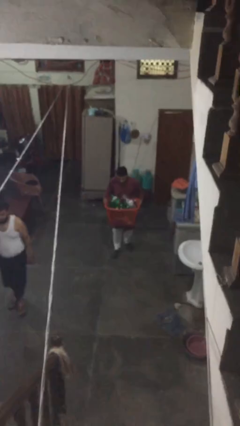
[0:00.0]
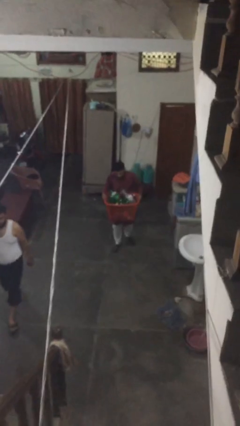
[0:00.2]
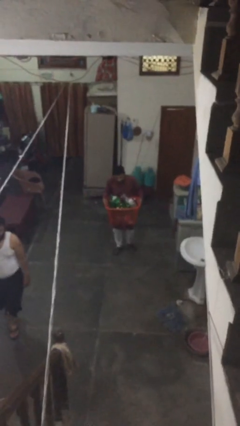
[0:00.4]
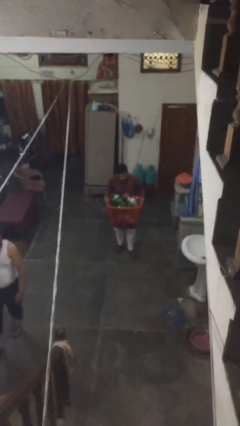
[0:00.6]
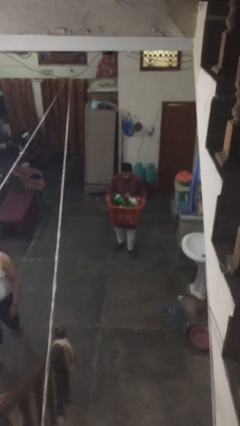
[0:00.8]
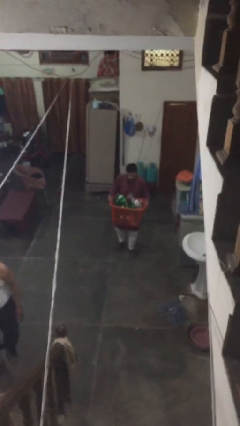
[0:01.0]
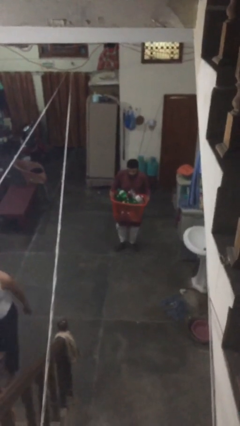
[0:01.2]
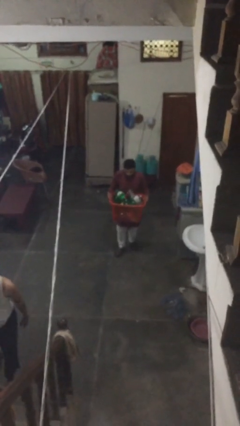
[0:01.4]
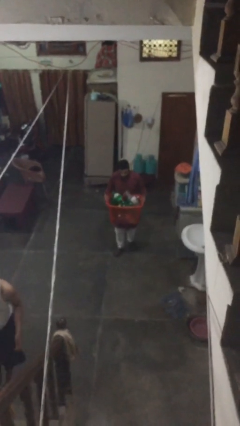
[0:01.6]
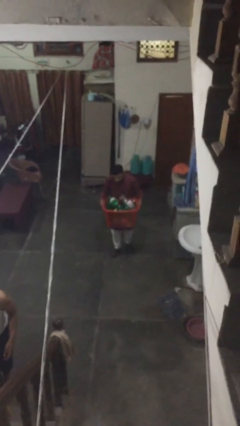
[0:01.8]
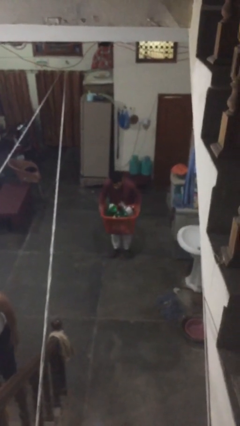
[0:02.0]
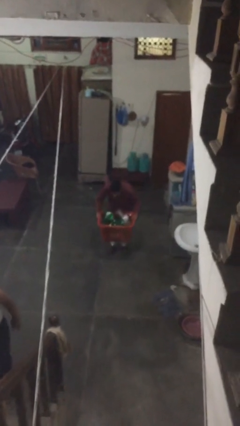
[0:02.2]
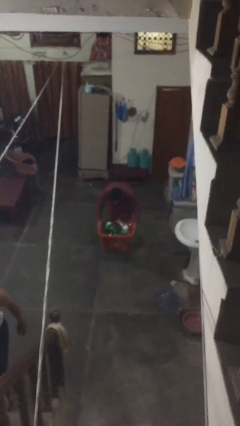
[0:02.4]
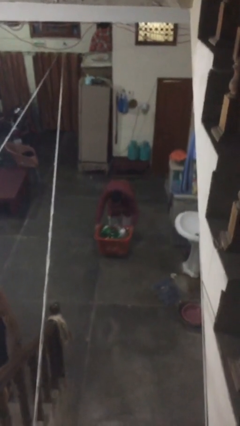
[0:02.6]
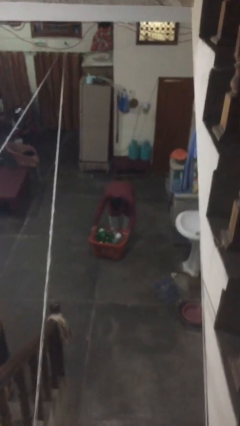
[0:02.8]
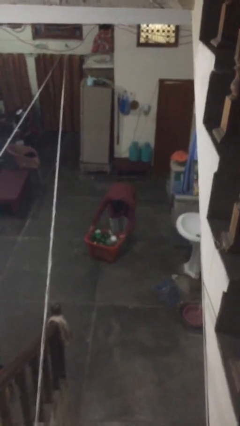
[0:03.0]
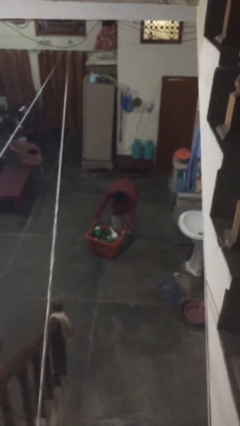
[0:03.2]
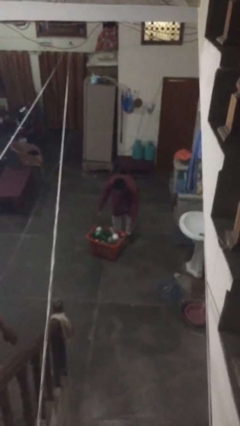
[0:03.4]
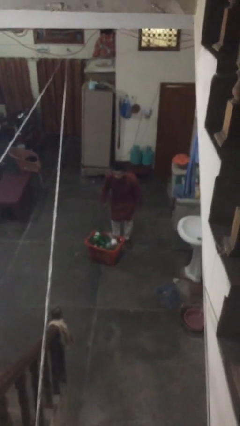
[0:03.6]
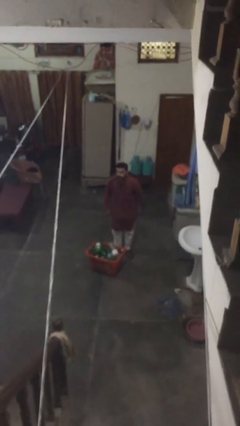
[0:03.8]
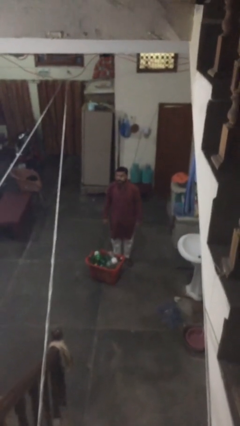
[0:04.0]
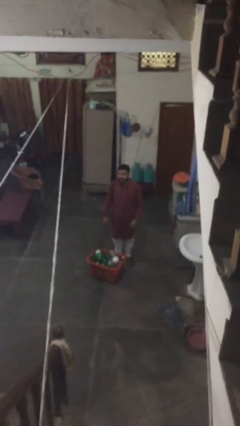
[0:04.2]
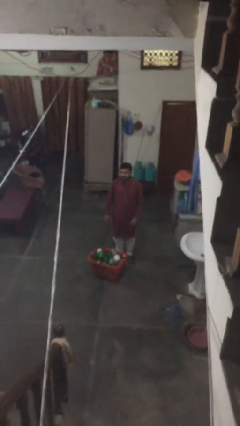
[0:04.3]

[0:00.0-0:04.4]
person puts down object on floor

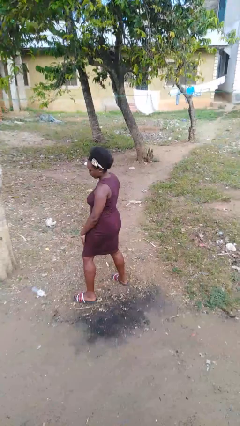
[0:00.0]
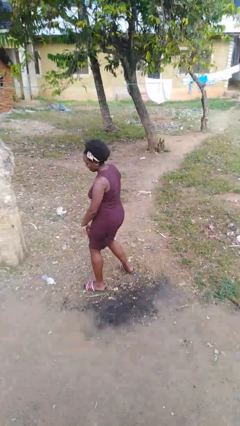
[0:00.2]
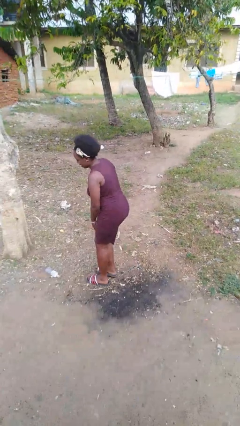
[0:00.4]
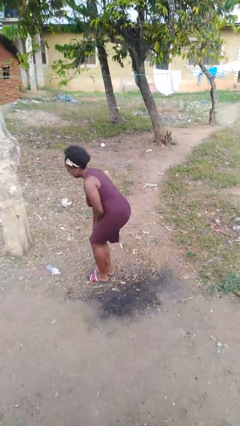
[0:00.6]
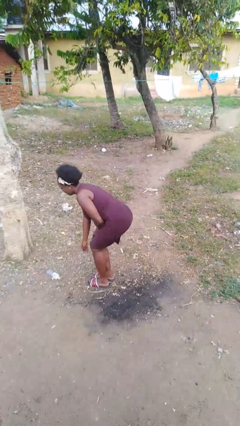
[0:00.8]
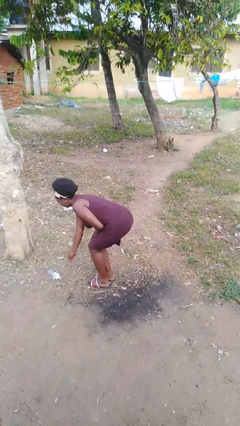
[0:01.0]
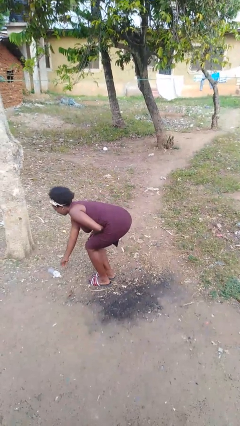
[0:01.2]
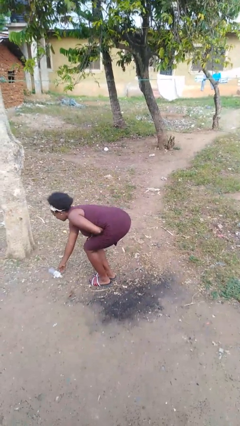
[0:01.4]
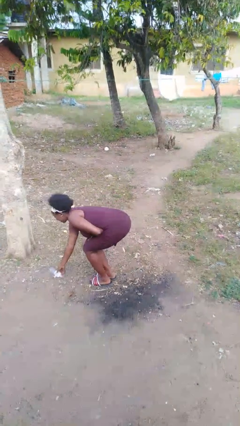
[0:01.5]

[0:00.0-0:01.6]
person picks up object from floor

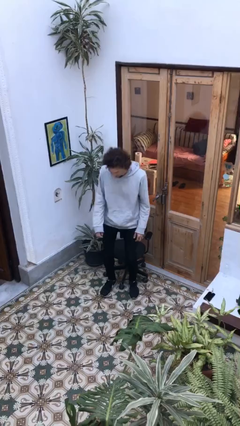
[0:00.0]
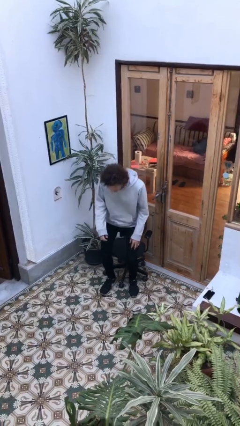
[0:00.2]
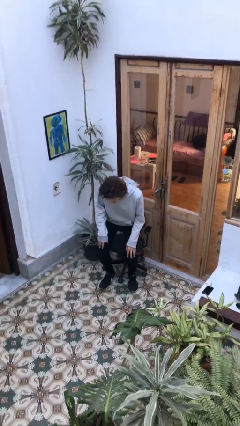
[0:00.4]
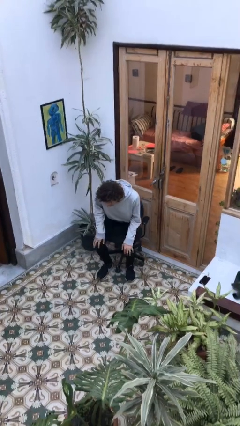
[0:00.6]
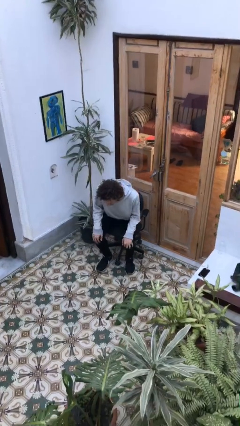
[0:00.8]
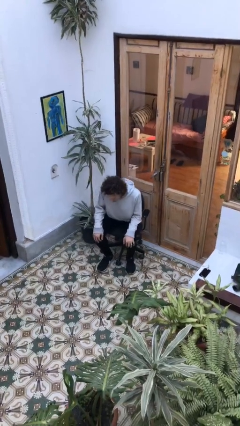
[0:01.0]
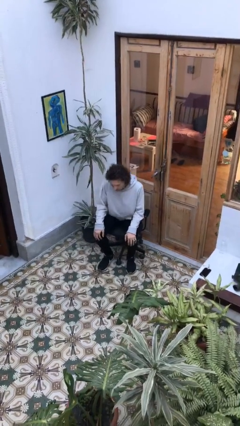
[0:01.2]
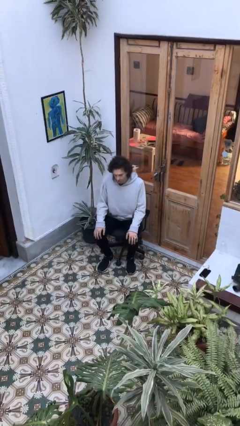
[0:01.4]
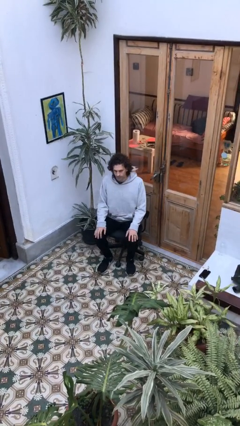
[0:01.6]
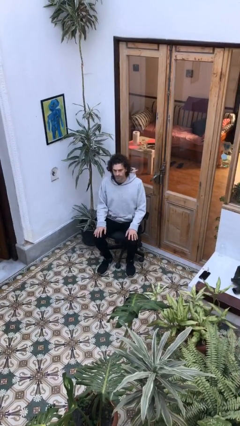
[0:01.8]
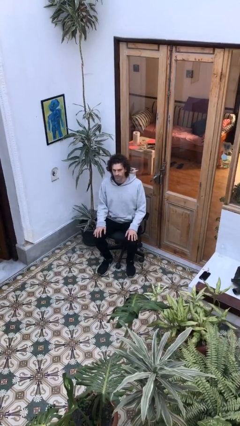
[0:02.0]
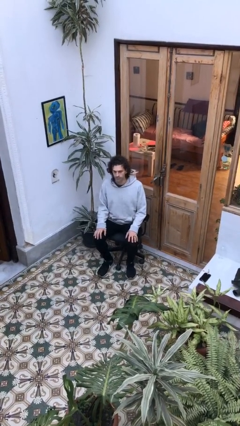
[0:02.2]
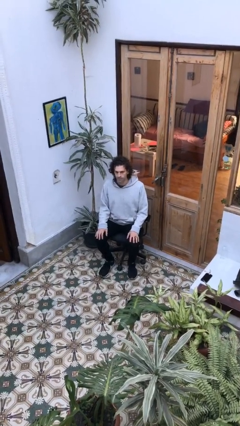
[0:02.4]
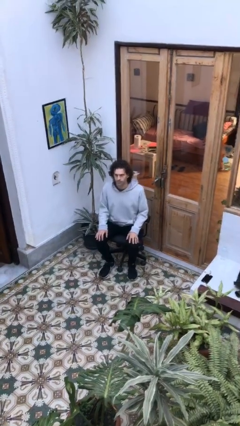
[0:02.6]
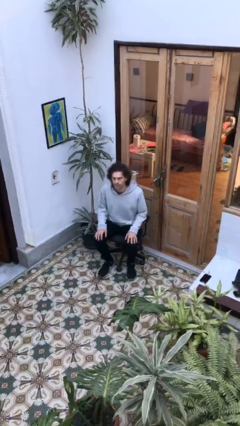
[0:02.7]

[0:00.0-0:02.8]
person sits down

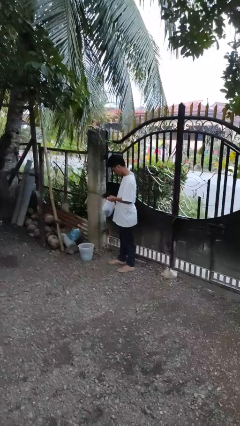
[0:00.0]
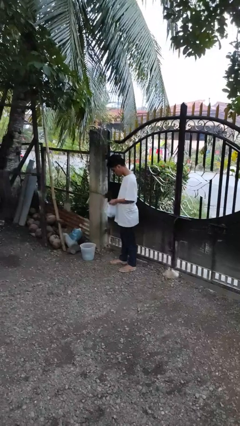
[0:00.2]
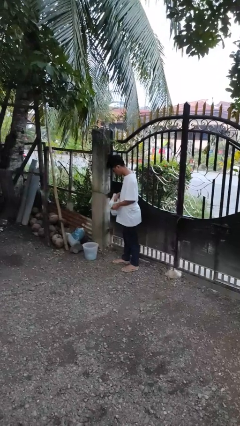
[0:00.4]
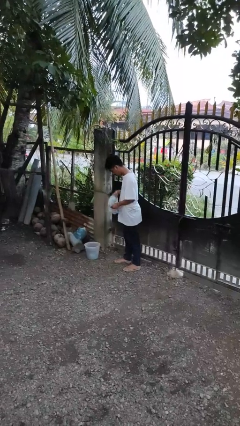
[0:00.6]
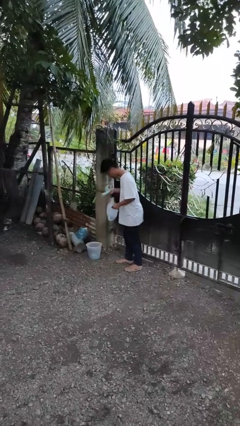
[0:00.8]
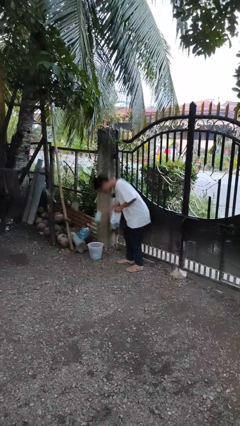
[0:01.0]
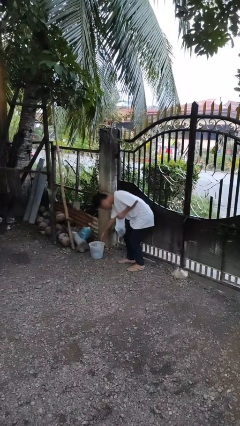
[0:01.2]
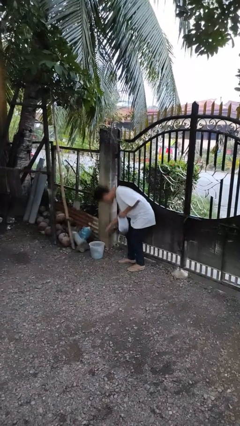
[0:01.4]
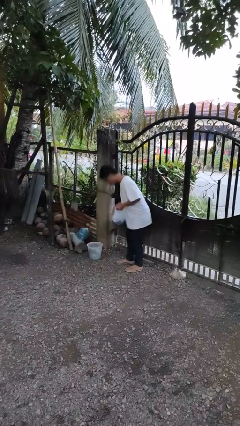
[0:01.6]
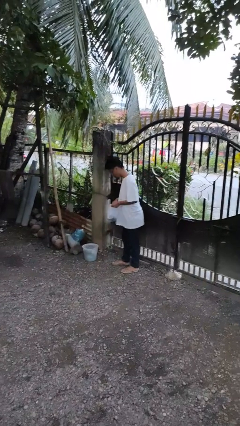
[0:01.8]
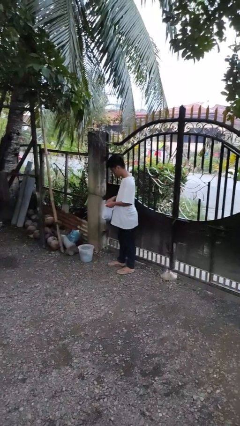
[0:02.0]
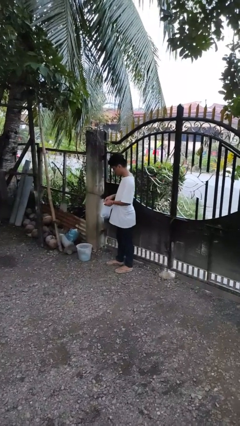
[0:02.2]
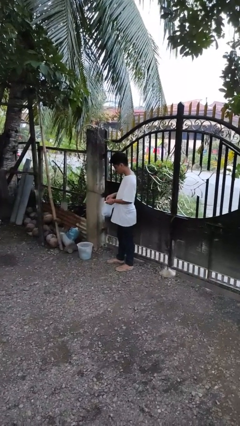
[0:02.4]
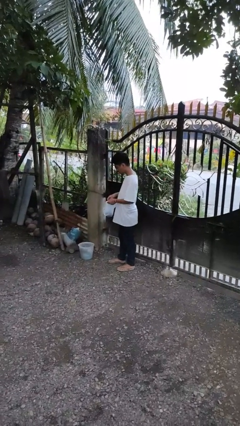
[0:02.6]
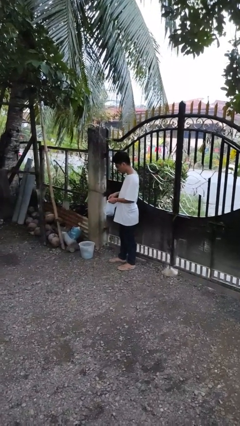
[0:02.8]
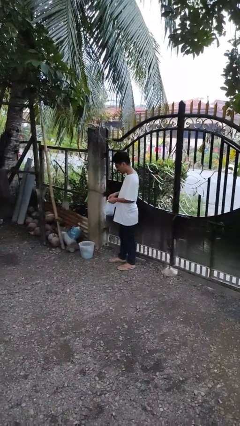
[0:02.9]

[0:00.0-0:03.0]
person discards trash

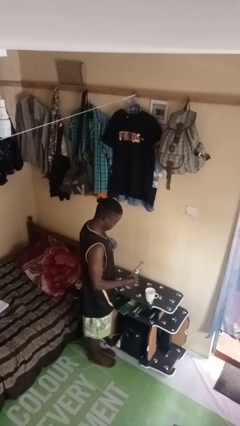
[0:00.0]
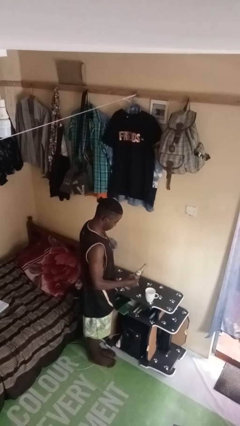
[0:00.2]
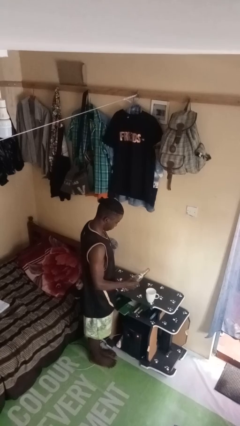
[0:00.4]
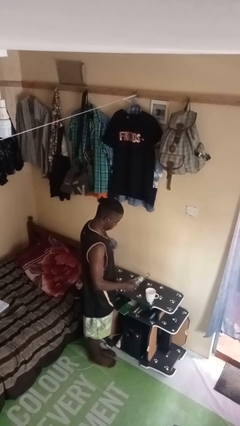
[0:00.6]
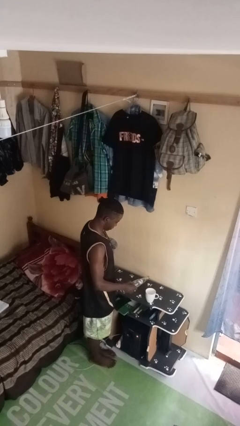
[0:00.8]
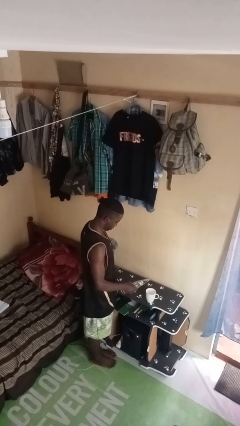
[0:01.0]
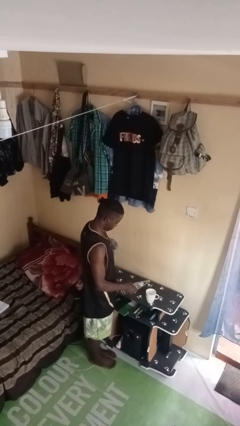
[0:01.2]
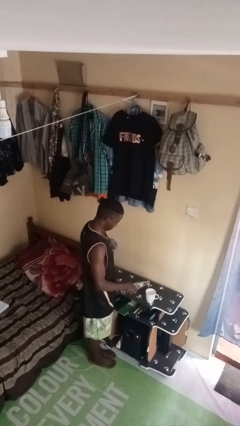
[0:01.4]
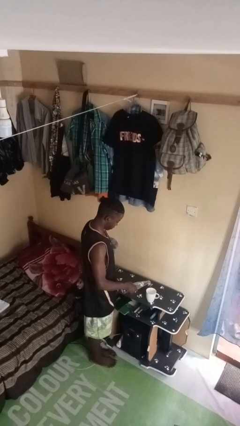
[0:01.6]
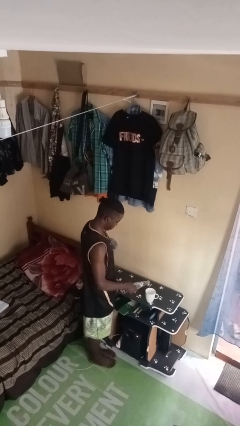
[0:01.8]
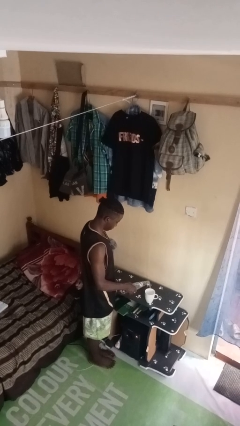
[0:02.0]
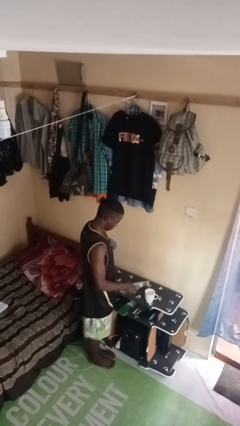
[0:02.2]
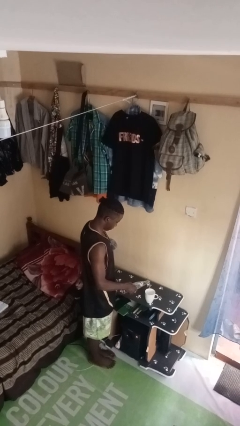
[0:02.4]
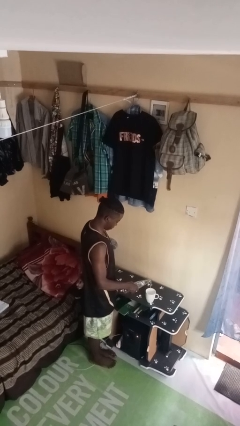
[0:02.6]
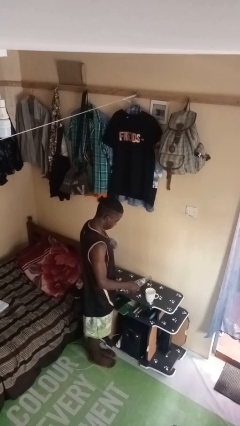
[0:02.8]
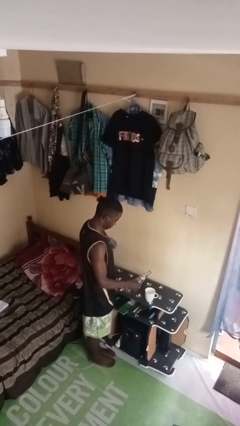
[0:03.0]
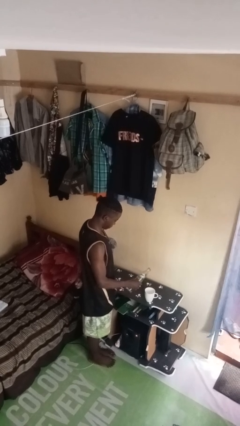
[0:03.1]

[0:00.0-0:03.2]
person pours liquid into cup

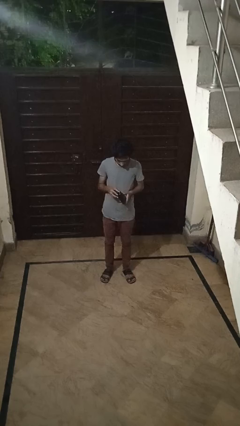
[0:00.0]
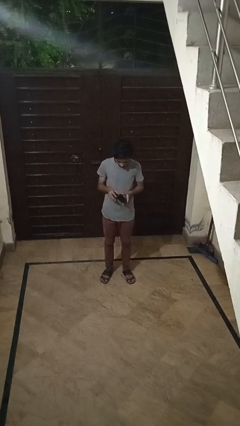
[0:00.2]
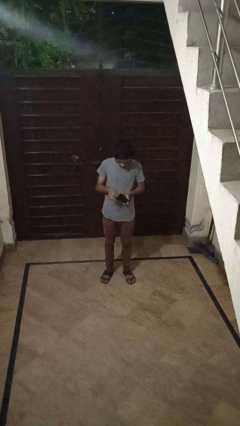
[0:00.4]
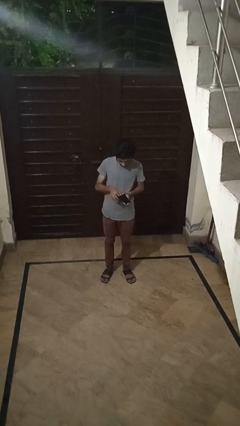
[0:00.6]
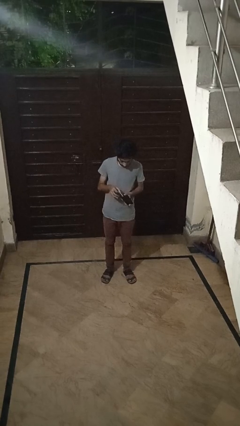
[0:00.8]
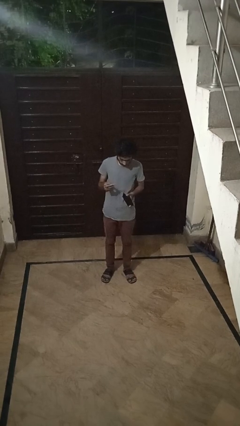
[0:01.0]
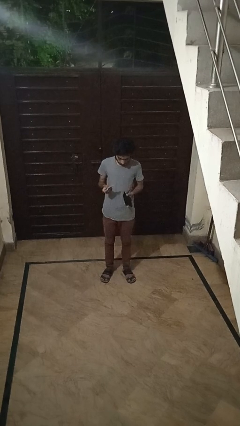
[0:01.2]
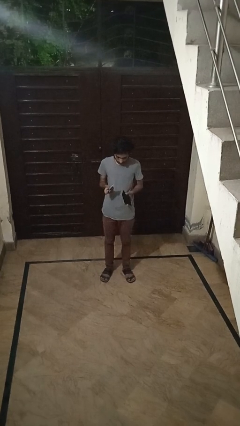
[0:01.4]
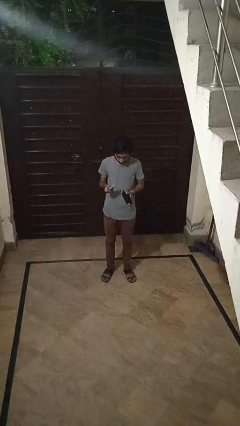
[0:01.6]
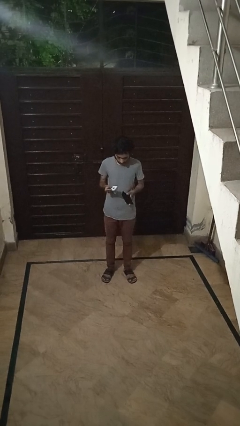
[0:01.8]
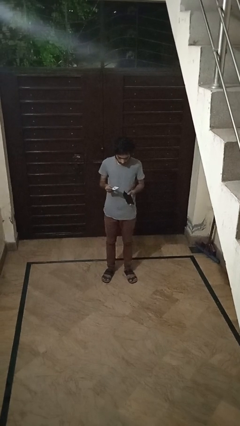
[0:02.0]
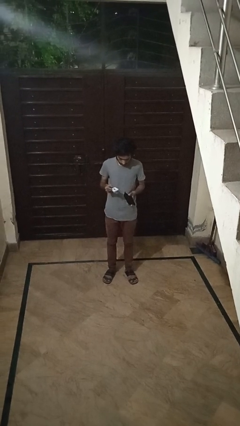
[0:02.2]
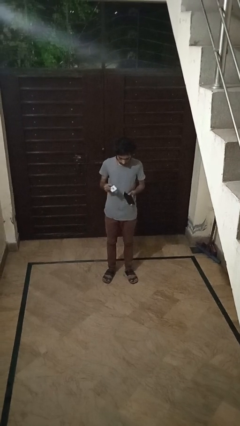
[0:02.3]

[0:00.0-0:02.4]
person takes object from purse

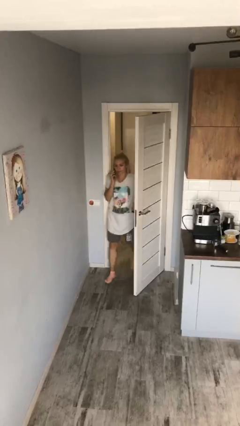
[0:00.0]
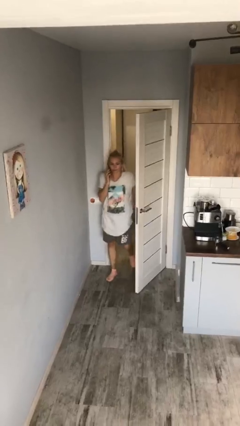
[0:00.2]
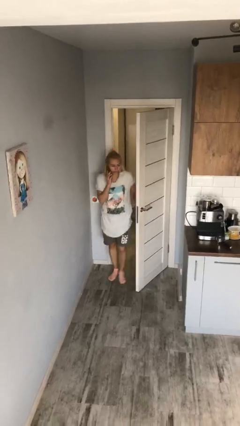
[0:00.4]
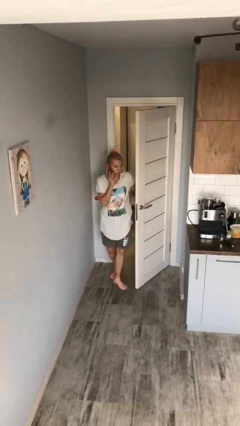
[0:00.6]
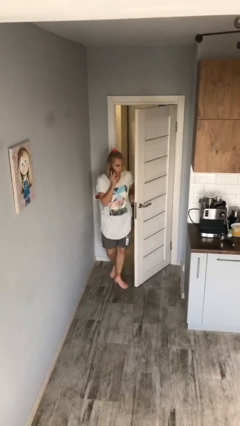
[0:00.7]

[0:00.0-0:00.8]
person enters scene through structure
